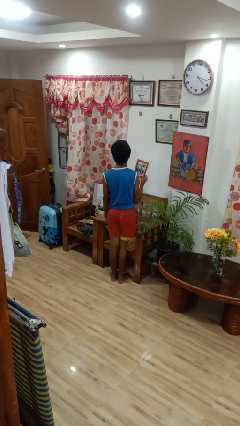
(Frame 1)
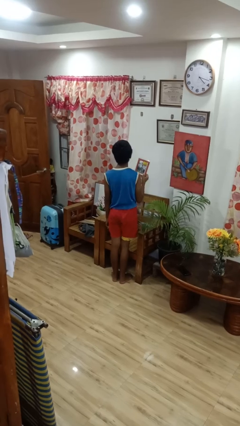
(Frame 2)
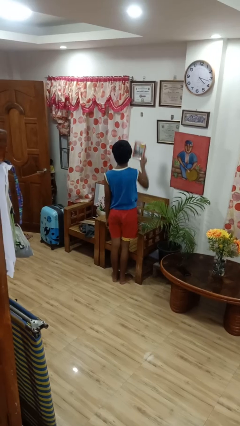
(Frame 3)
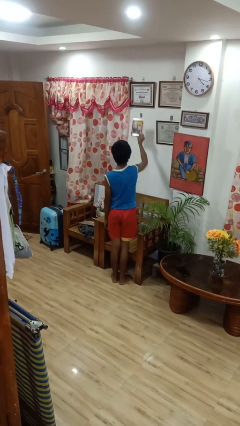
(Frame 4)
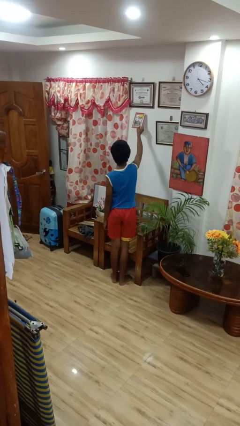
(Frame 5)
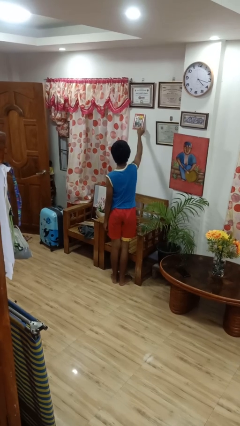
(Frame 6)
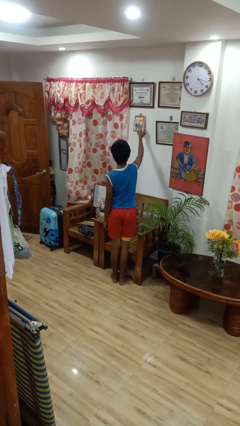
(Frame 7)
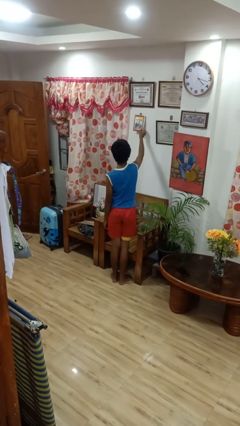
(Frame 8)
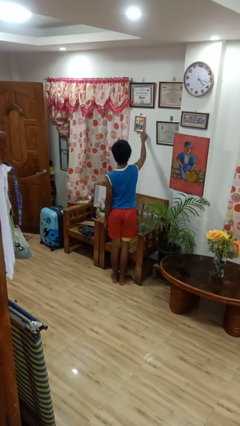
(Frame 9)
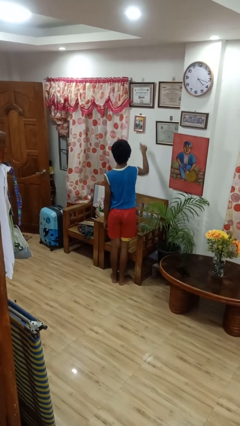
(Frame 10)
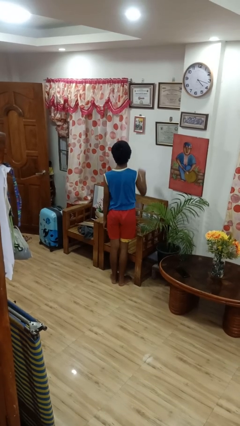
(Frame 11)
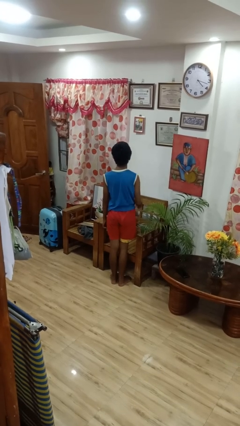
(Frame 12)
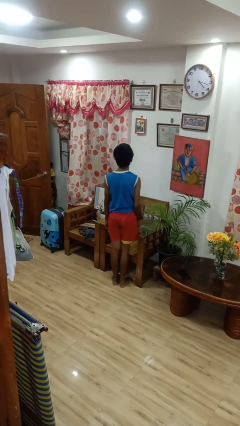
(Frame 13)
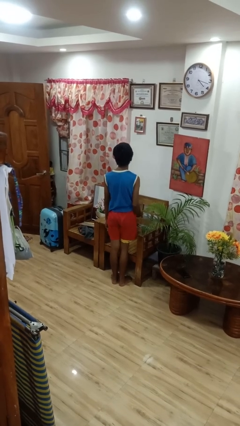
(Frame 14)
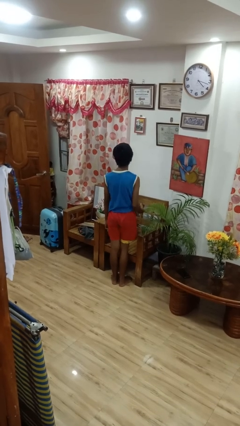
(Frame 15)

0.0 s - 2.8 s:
person puts up picture frame

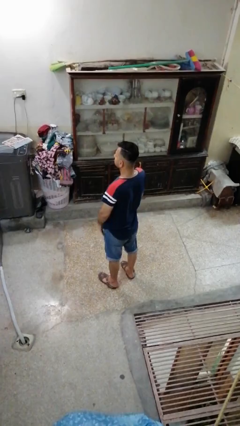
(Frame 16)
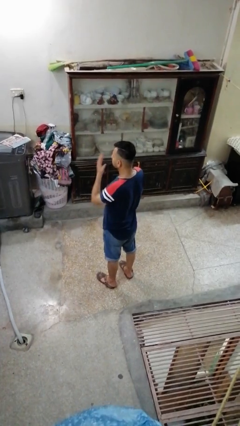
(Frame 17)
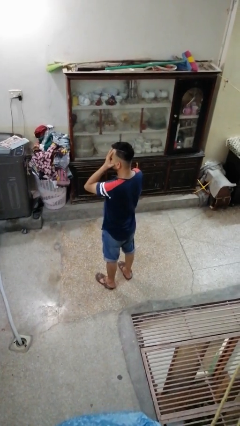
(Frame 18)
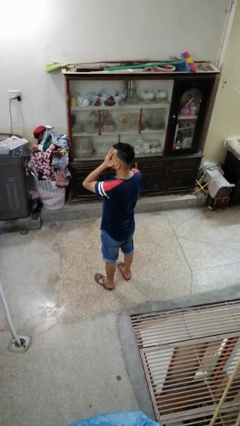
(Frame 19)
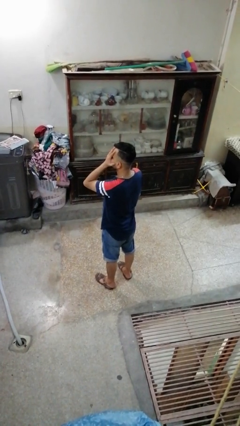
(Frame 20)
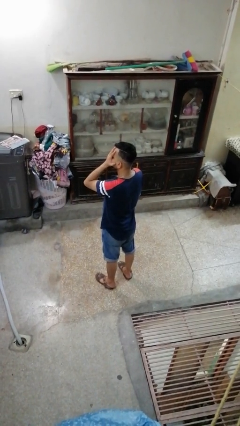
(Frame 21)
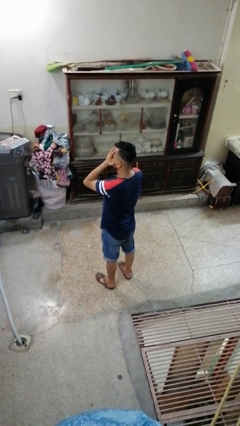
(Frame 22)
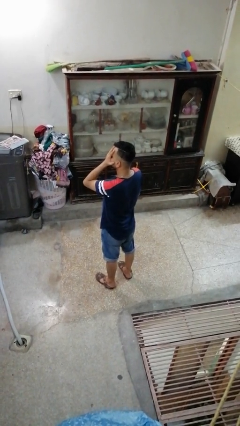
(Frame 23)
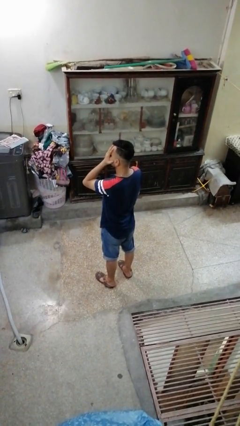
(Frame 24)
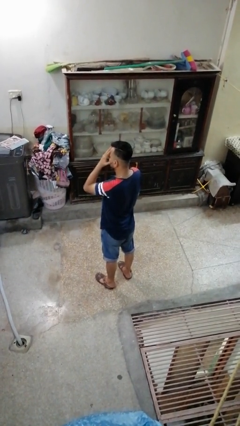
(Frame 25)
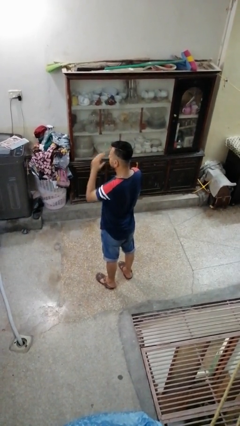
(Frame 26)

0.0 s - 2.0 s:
person covers face with hands

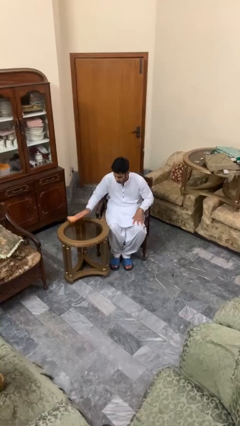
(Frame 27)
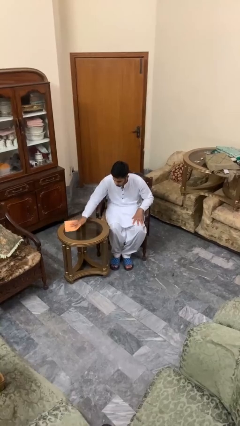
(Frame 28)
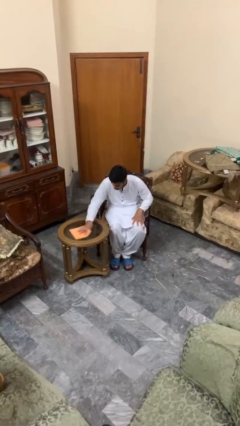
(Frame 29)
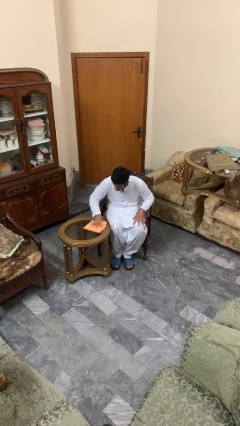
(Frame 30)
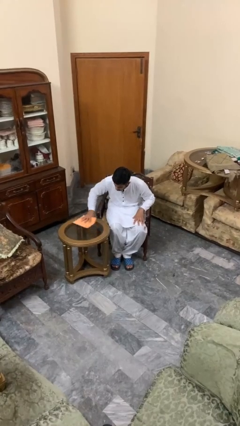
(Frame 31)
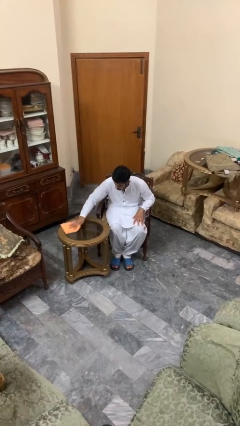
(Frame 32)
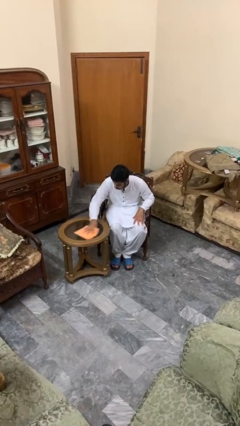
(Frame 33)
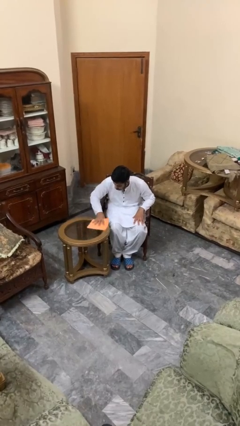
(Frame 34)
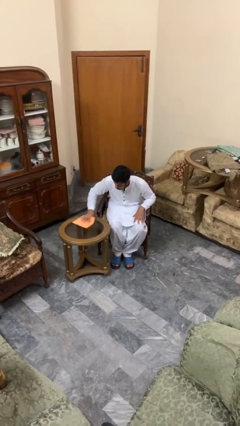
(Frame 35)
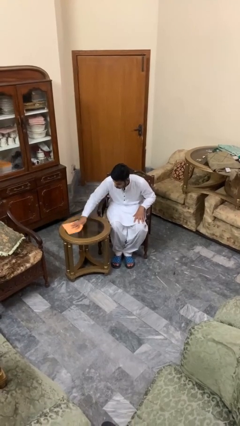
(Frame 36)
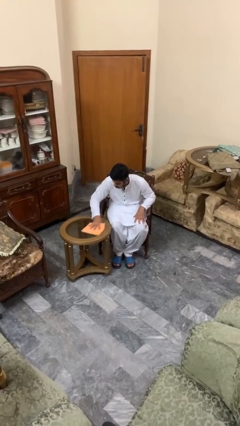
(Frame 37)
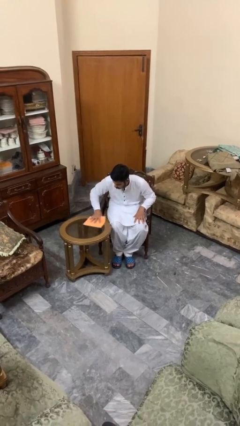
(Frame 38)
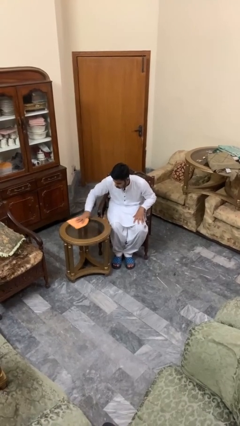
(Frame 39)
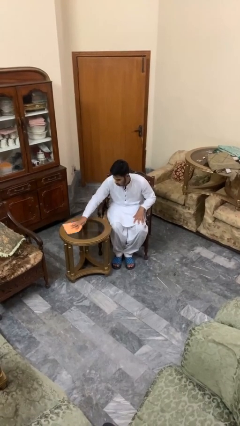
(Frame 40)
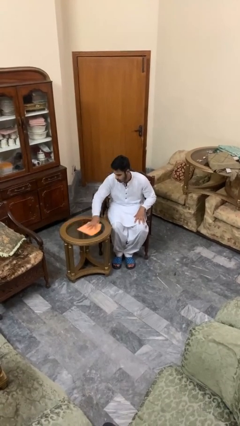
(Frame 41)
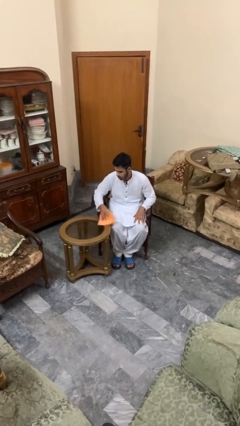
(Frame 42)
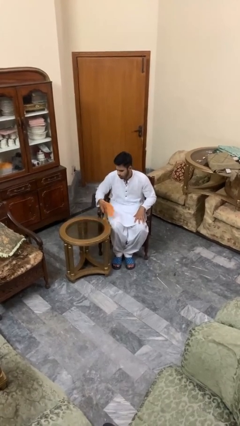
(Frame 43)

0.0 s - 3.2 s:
person cleans table with rag

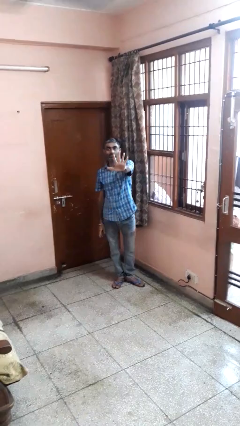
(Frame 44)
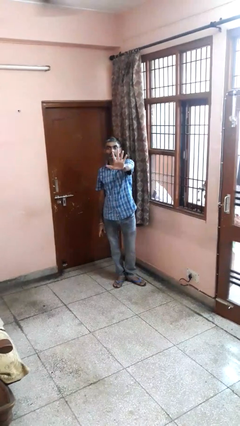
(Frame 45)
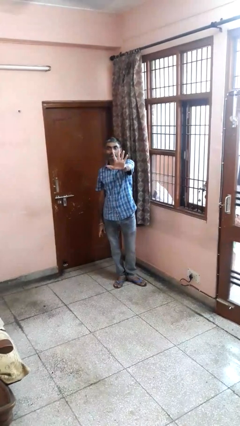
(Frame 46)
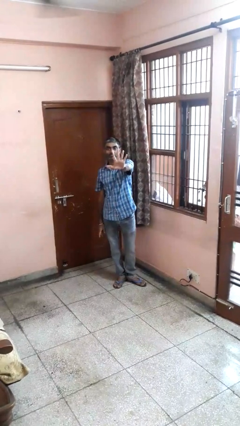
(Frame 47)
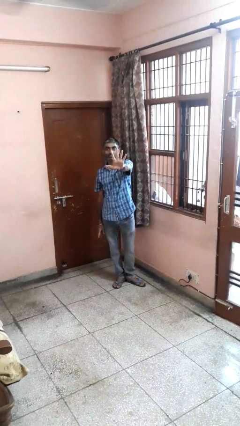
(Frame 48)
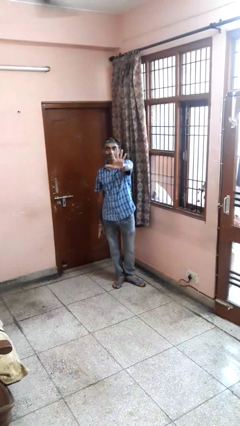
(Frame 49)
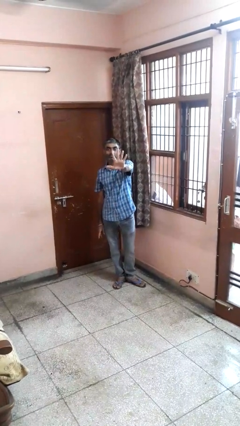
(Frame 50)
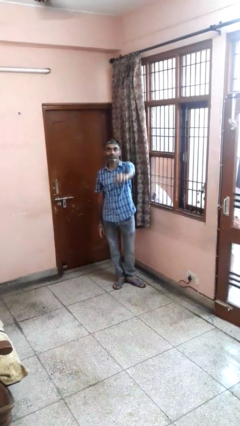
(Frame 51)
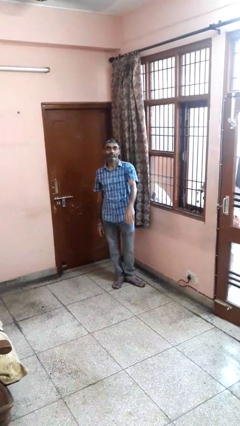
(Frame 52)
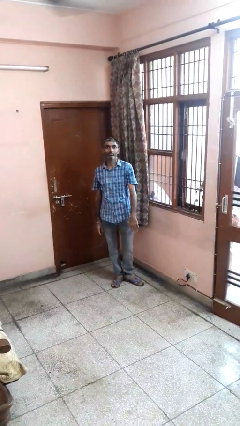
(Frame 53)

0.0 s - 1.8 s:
person gestures number five

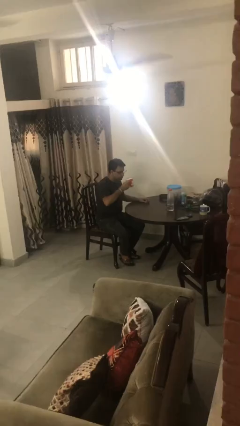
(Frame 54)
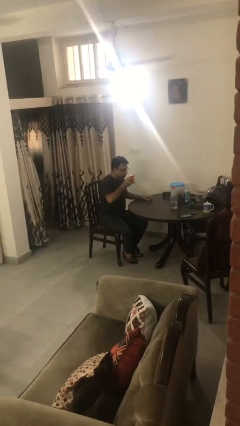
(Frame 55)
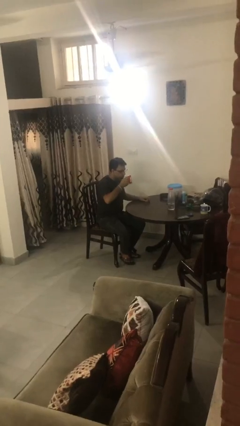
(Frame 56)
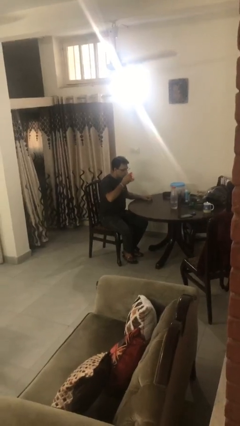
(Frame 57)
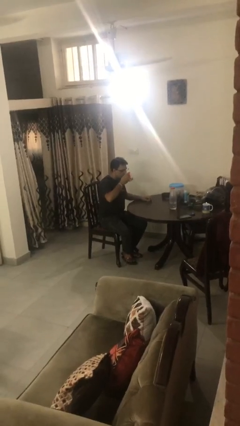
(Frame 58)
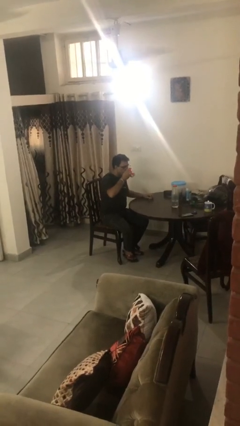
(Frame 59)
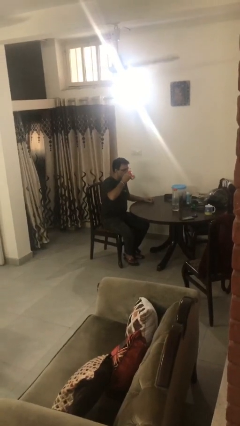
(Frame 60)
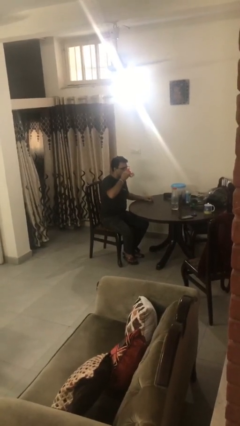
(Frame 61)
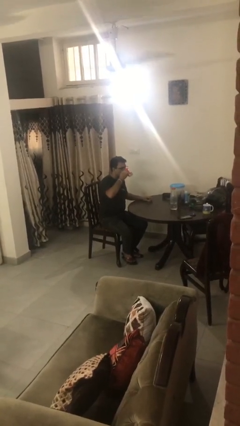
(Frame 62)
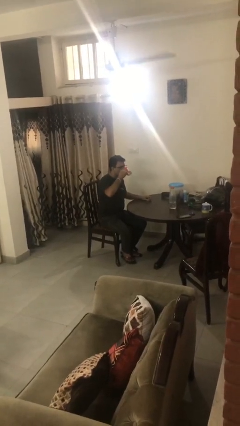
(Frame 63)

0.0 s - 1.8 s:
person drinks from mug

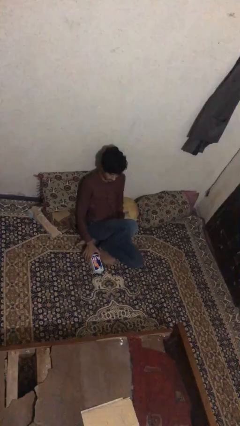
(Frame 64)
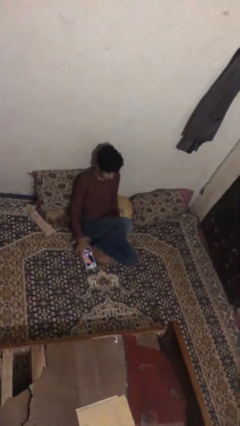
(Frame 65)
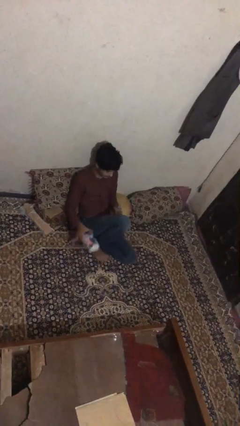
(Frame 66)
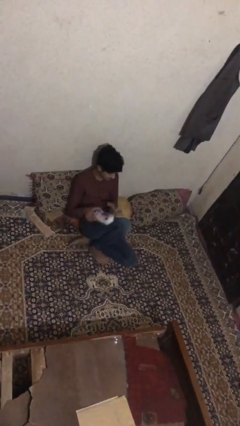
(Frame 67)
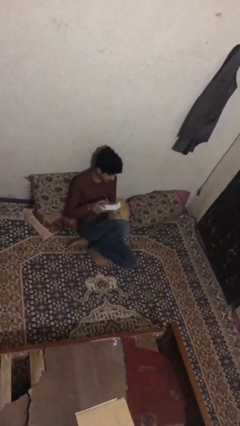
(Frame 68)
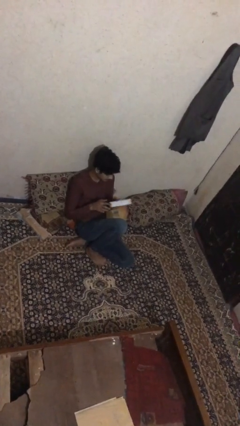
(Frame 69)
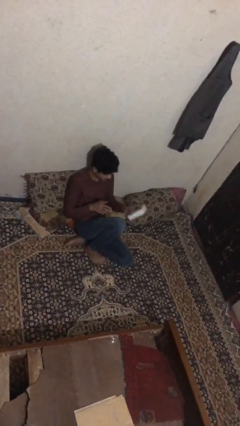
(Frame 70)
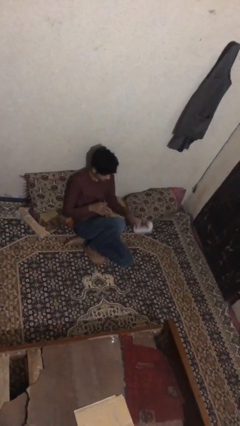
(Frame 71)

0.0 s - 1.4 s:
person picks up object from floor

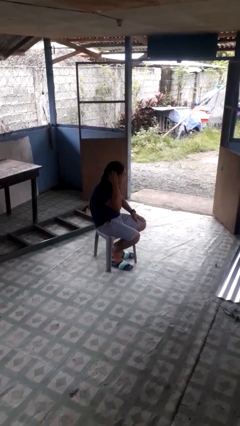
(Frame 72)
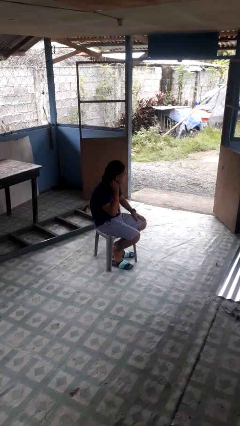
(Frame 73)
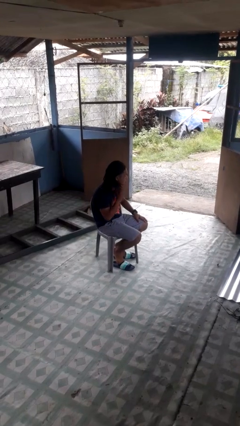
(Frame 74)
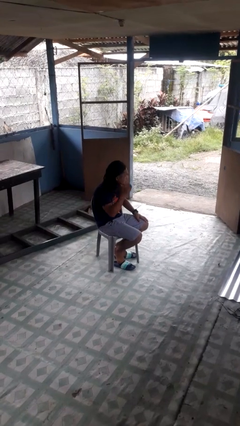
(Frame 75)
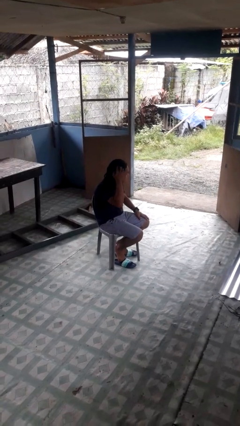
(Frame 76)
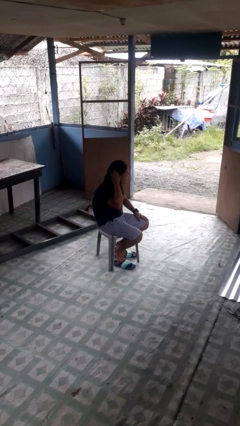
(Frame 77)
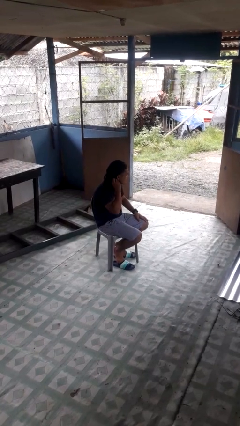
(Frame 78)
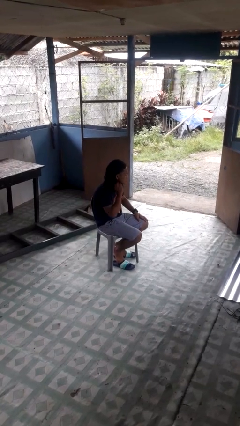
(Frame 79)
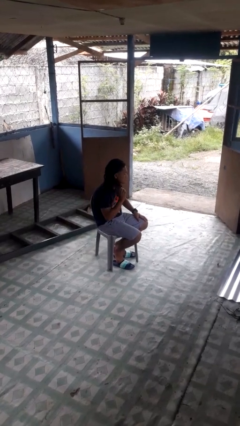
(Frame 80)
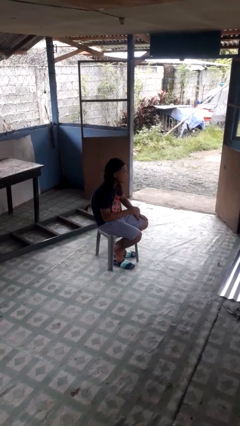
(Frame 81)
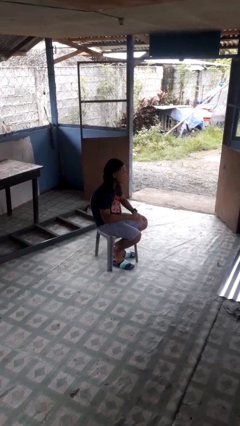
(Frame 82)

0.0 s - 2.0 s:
person strokes hair

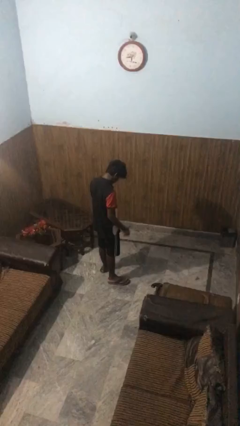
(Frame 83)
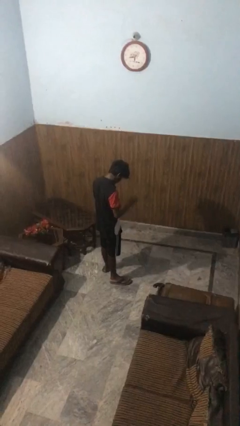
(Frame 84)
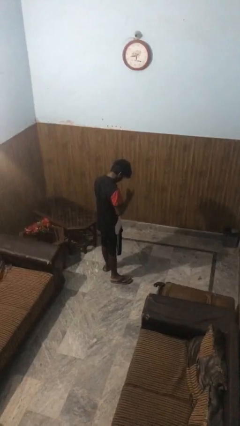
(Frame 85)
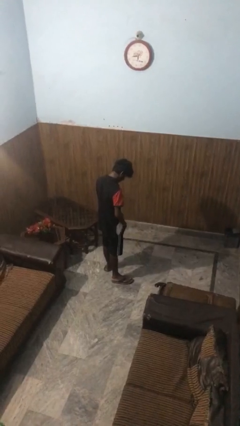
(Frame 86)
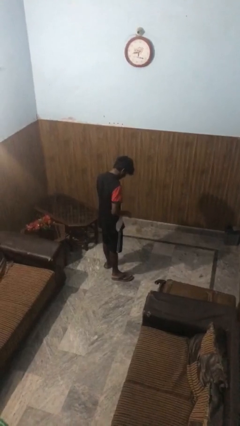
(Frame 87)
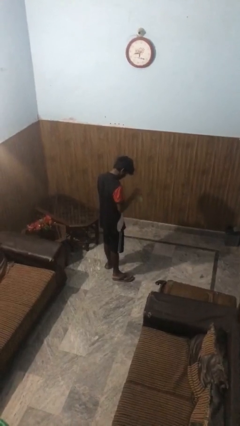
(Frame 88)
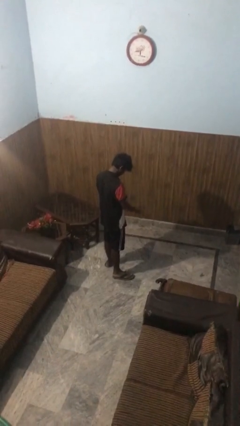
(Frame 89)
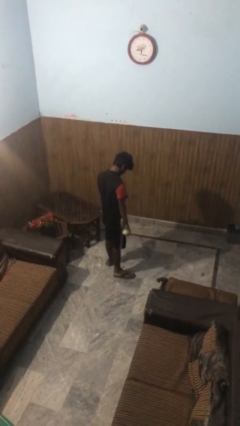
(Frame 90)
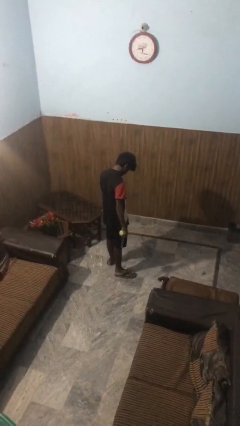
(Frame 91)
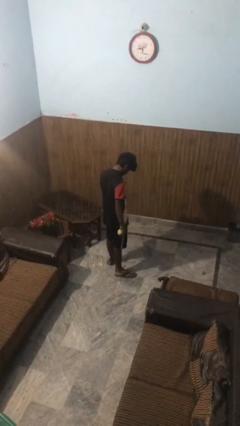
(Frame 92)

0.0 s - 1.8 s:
person bounces ball on floor

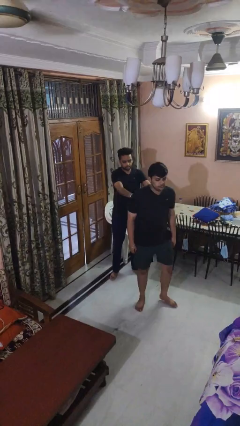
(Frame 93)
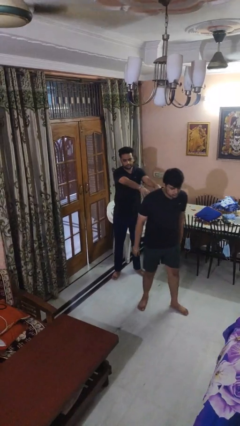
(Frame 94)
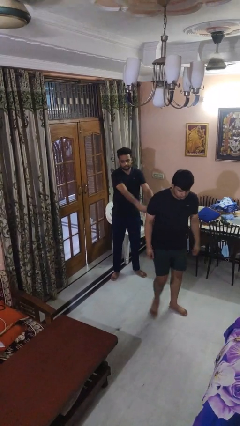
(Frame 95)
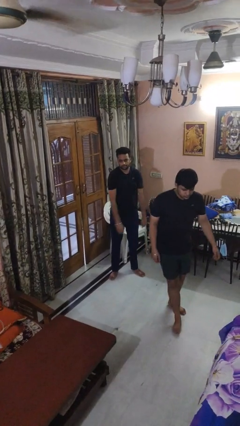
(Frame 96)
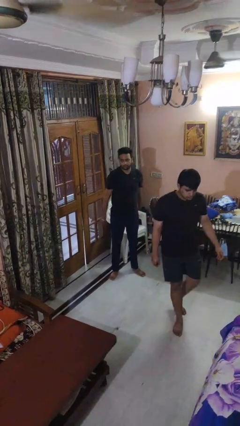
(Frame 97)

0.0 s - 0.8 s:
person shoves person
